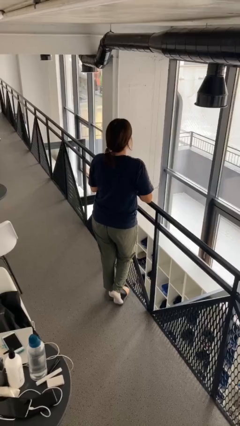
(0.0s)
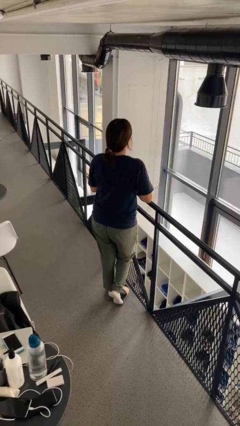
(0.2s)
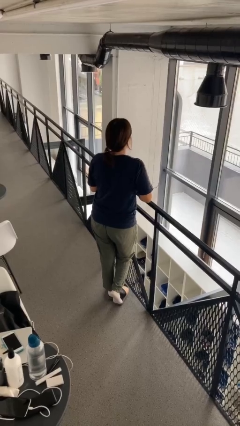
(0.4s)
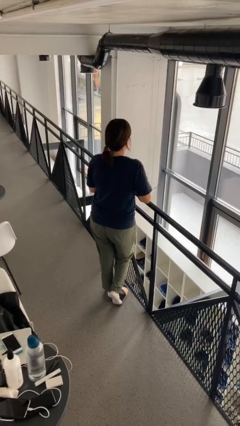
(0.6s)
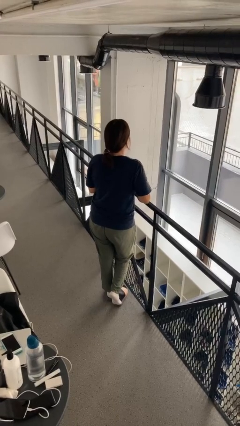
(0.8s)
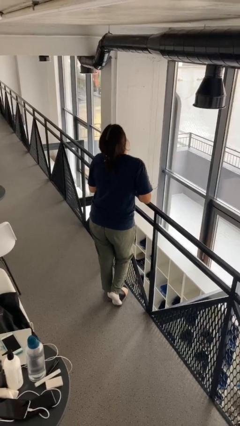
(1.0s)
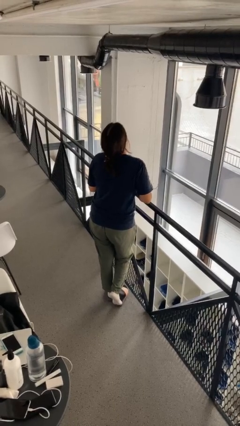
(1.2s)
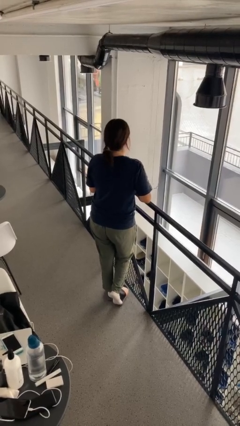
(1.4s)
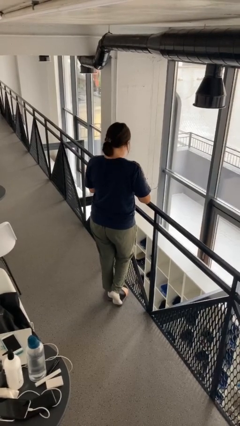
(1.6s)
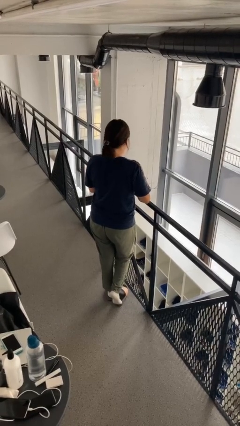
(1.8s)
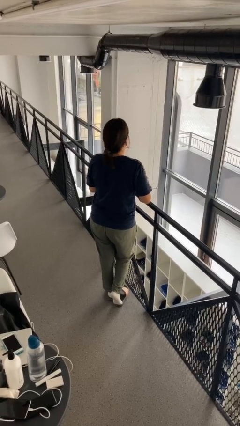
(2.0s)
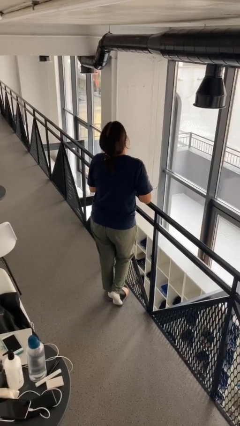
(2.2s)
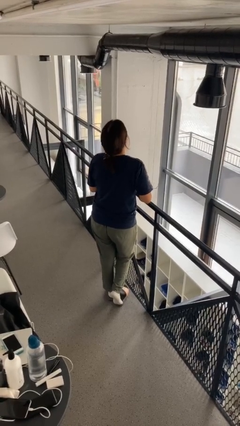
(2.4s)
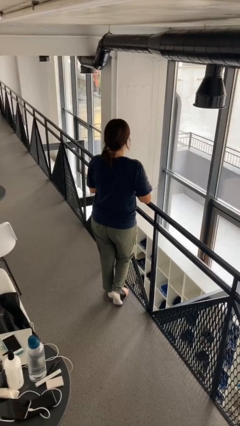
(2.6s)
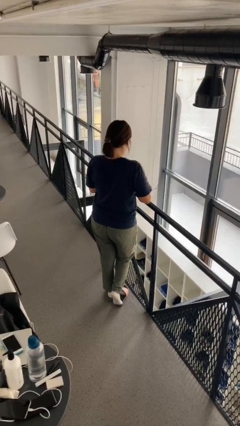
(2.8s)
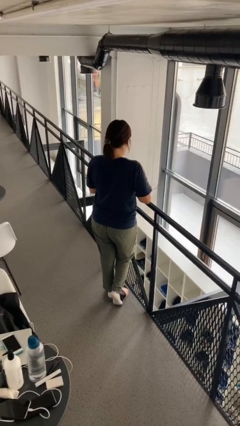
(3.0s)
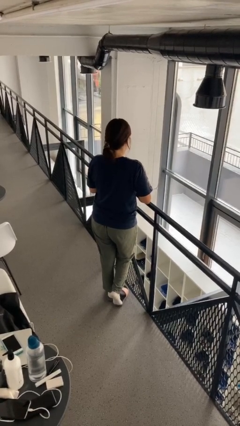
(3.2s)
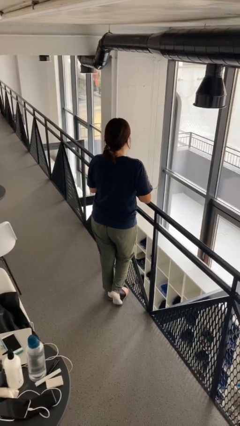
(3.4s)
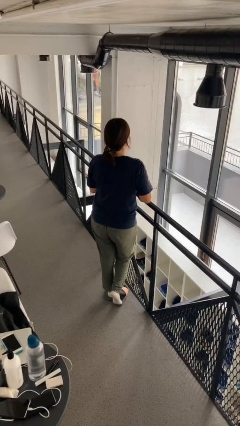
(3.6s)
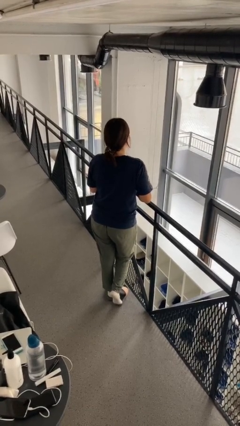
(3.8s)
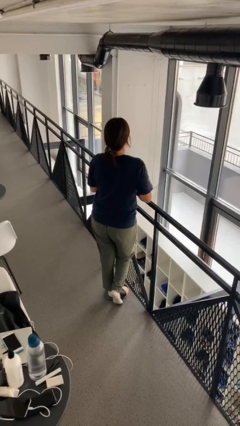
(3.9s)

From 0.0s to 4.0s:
person nods head

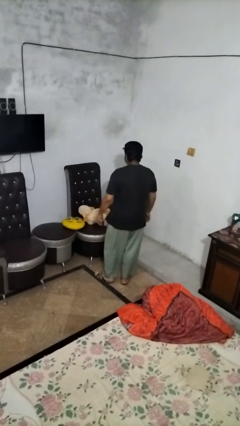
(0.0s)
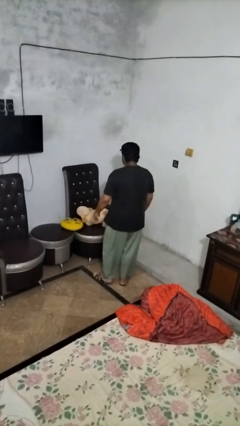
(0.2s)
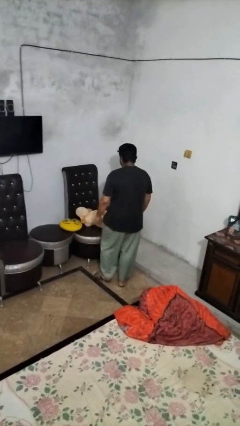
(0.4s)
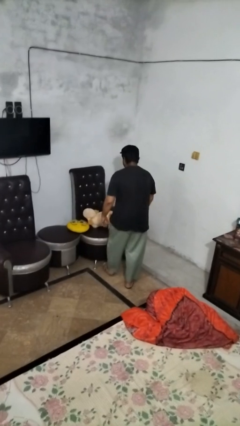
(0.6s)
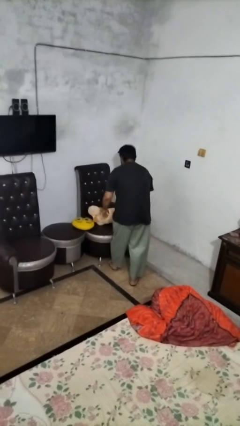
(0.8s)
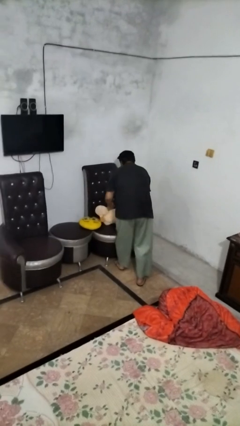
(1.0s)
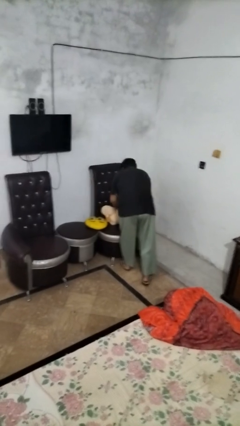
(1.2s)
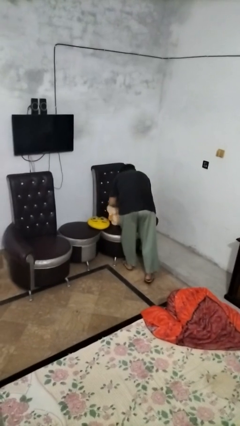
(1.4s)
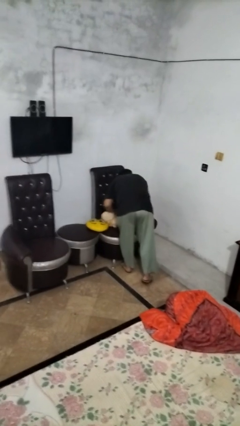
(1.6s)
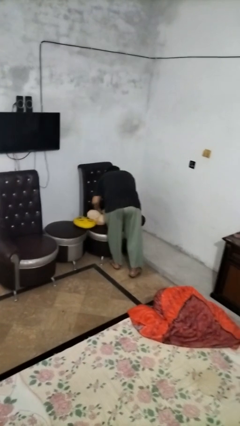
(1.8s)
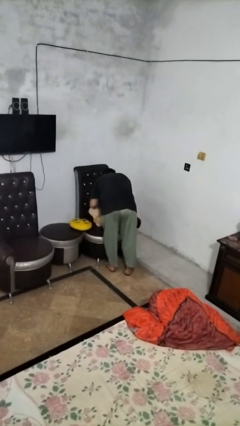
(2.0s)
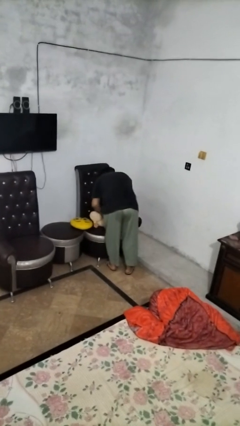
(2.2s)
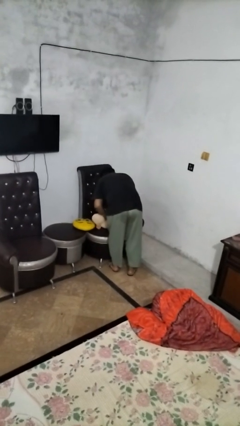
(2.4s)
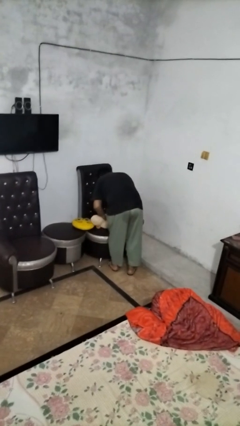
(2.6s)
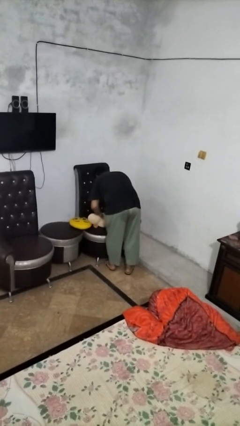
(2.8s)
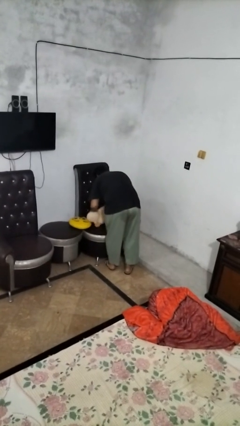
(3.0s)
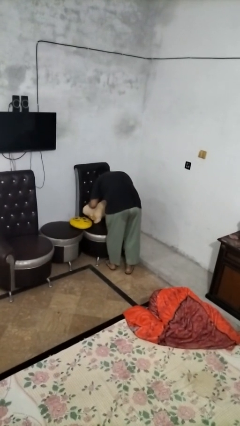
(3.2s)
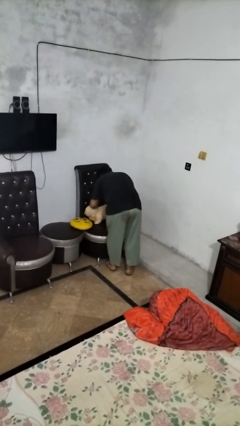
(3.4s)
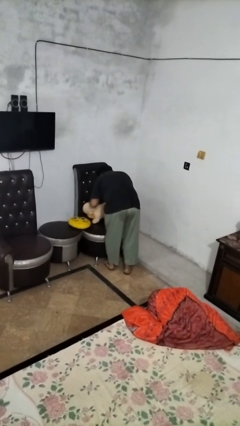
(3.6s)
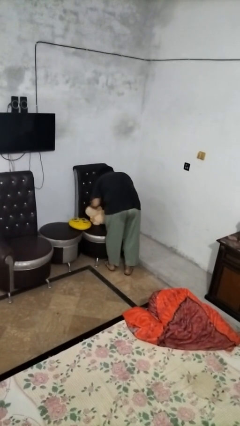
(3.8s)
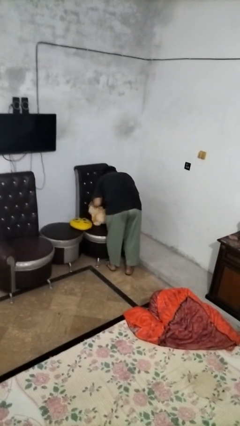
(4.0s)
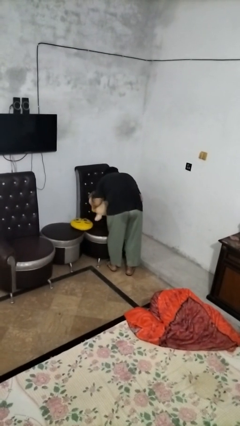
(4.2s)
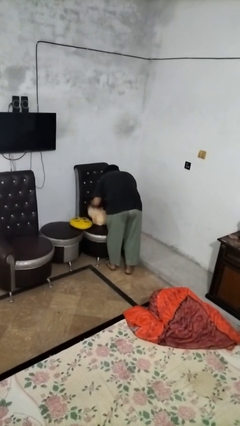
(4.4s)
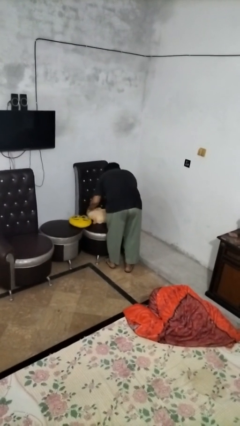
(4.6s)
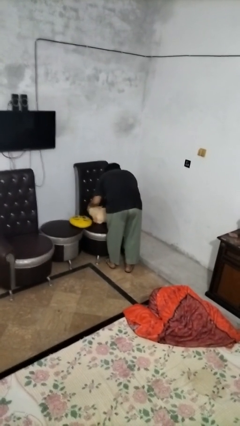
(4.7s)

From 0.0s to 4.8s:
person searches in couch

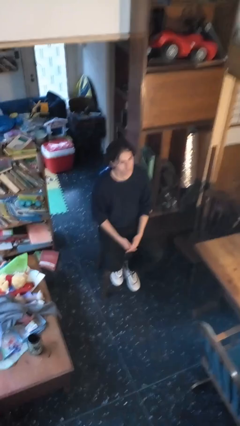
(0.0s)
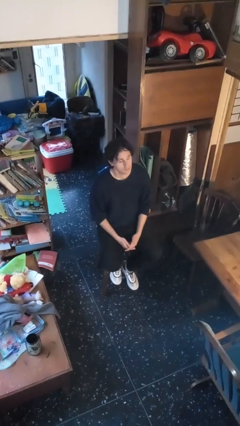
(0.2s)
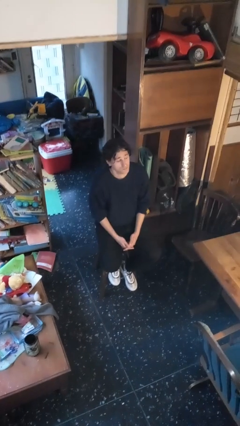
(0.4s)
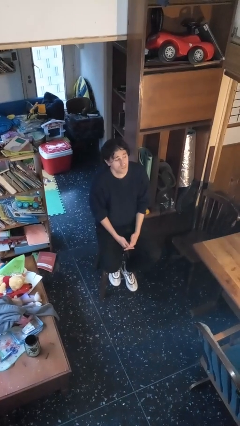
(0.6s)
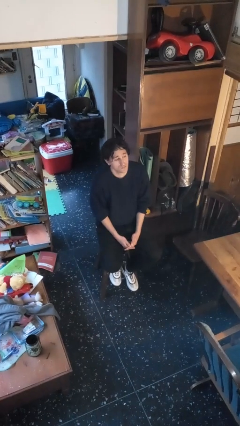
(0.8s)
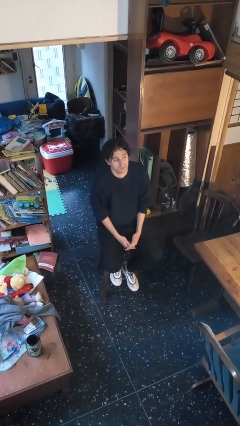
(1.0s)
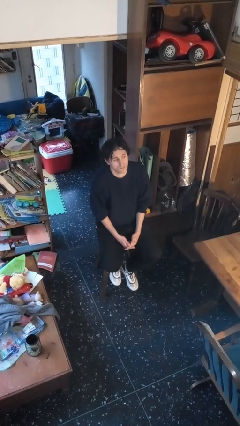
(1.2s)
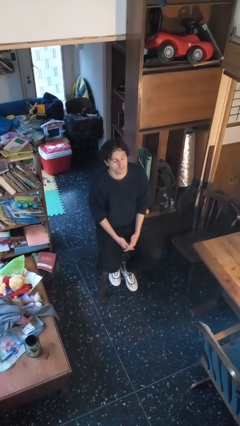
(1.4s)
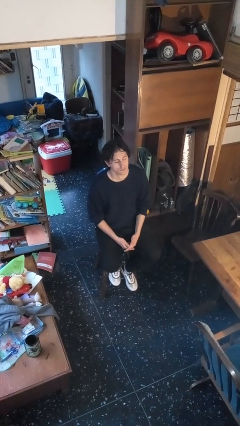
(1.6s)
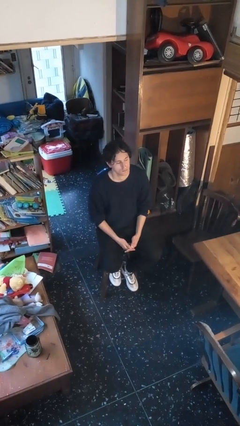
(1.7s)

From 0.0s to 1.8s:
person shrugs

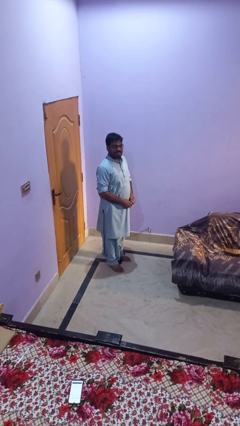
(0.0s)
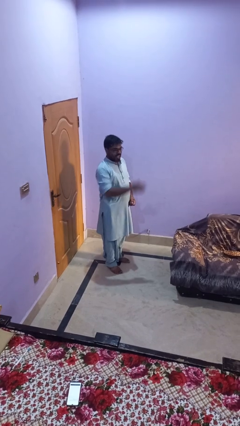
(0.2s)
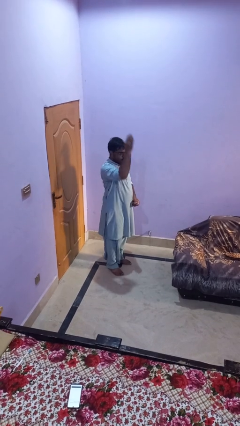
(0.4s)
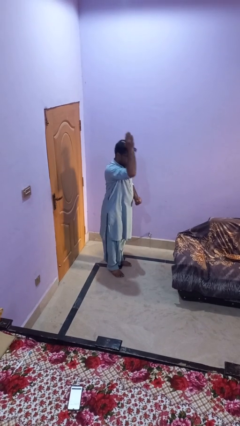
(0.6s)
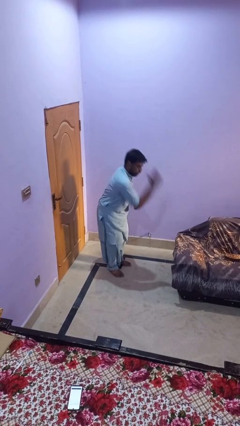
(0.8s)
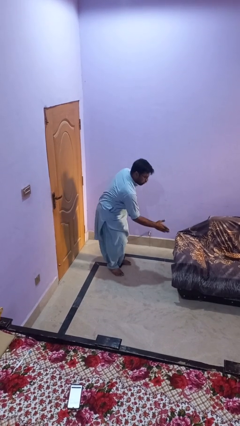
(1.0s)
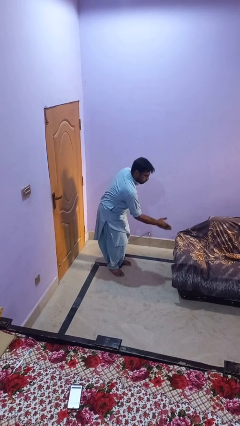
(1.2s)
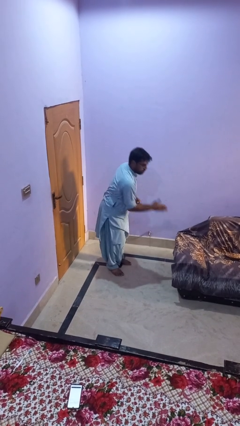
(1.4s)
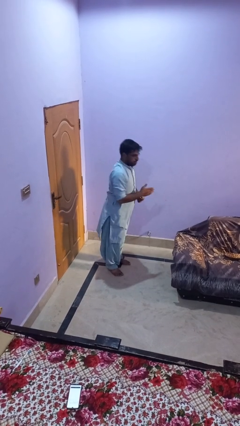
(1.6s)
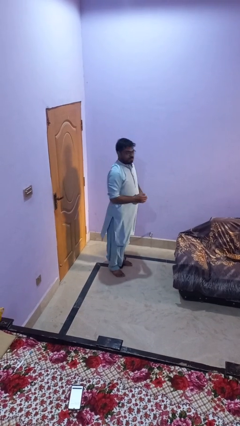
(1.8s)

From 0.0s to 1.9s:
person karate chop

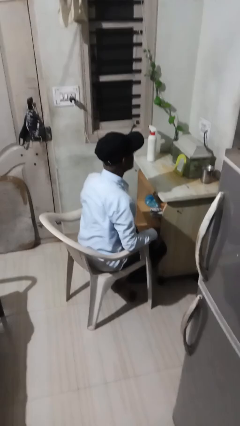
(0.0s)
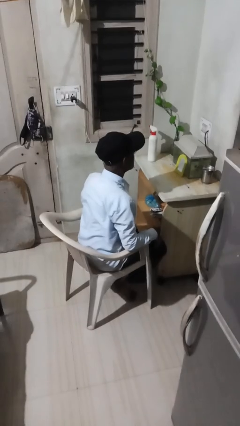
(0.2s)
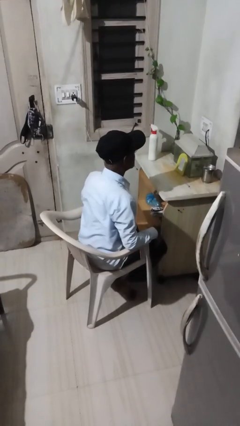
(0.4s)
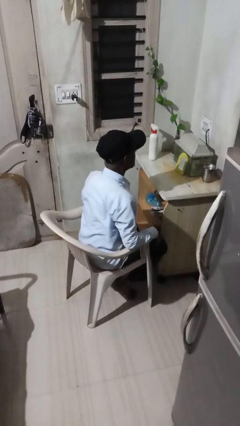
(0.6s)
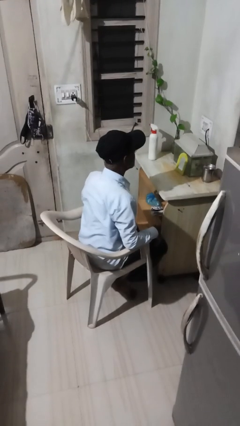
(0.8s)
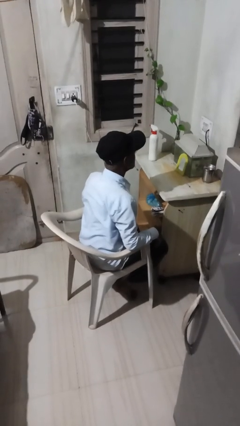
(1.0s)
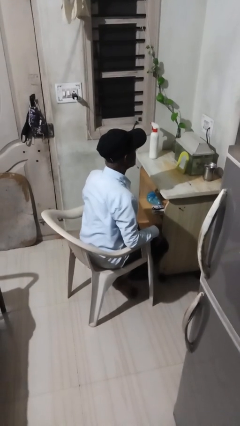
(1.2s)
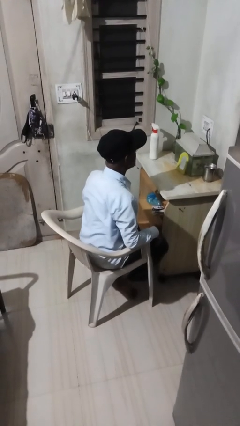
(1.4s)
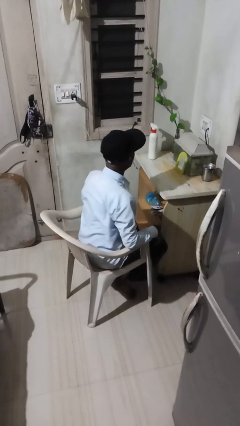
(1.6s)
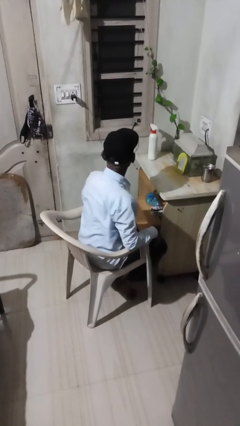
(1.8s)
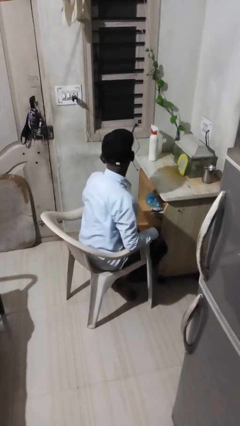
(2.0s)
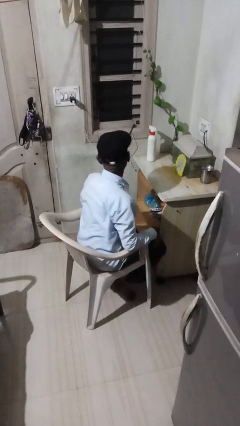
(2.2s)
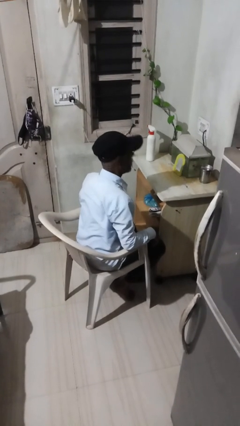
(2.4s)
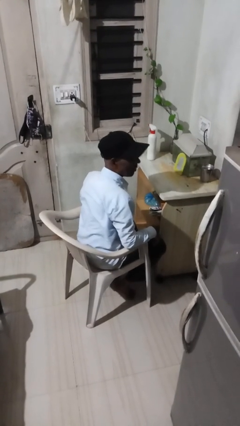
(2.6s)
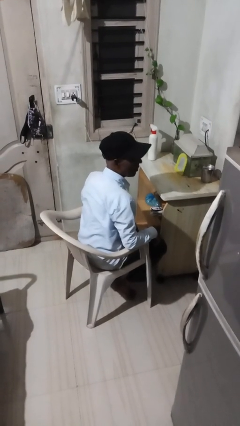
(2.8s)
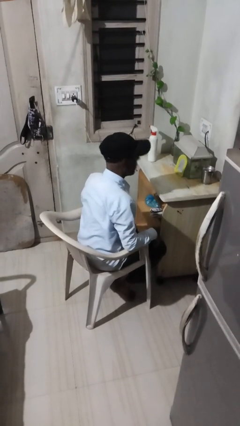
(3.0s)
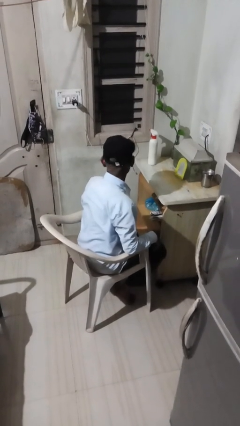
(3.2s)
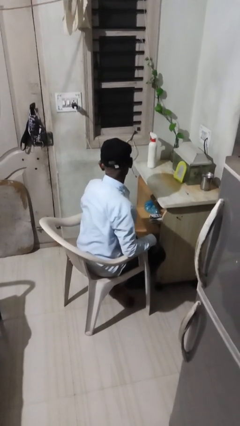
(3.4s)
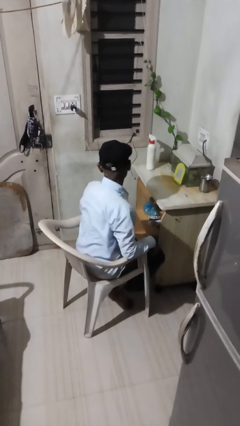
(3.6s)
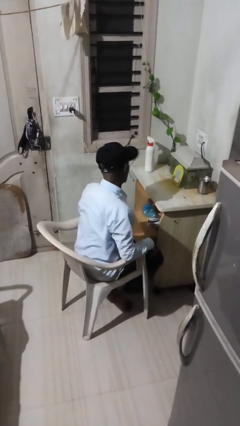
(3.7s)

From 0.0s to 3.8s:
person shakes head

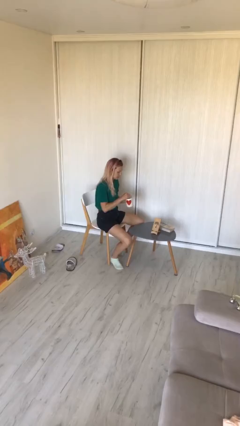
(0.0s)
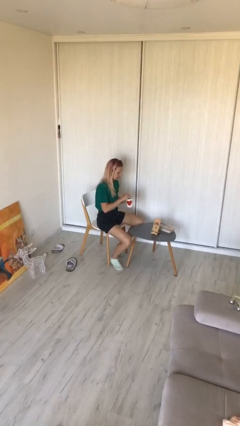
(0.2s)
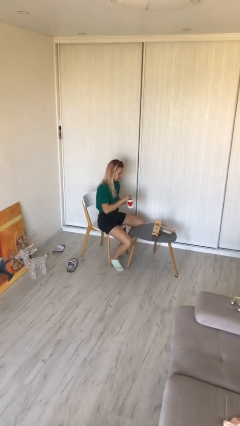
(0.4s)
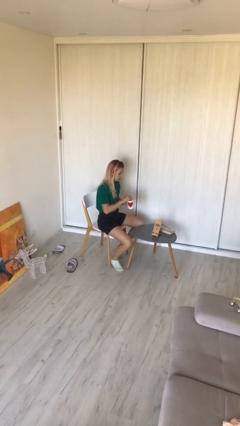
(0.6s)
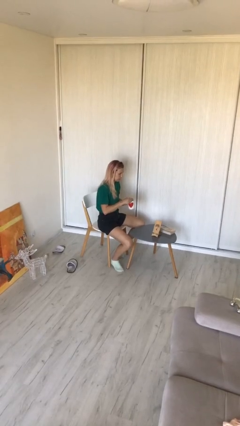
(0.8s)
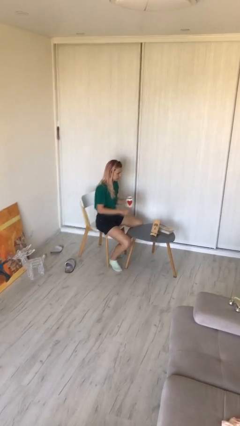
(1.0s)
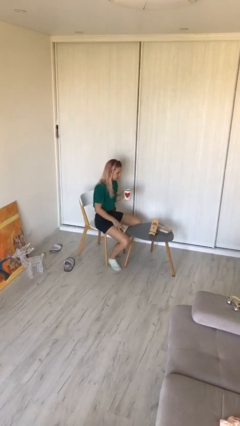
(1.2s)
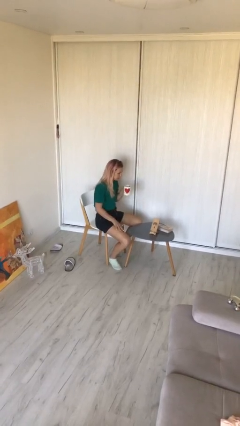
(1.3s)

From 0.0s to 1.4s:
person stirs mug
